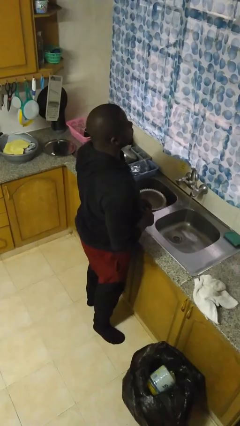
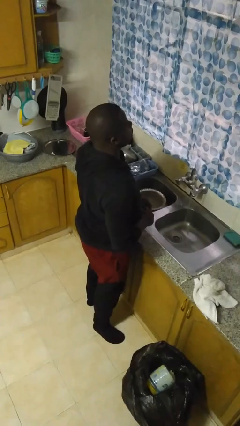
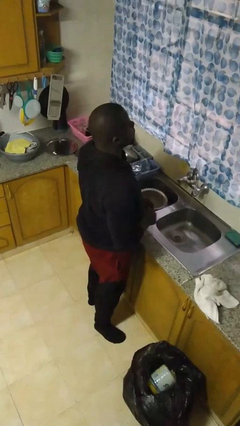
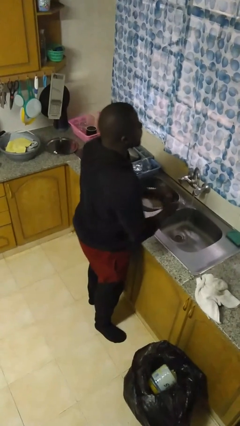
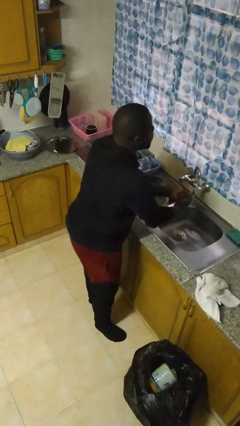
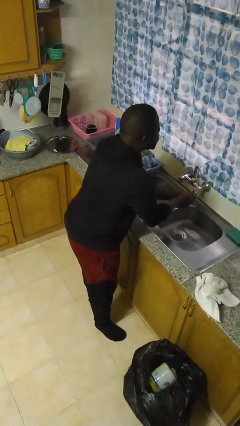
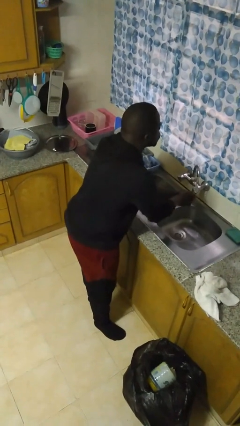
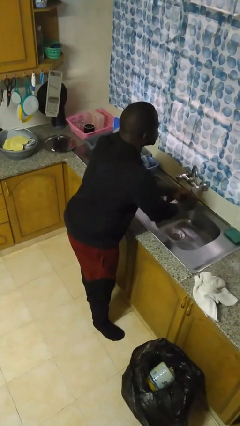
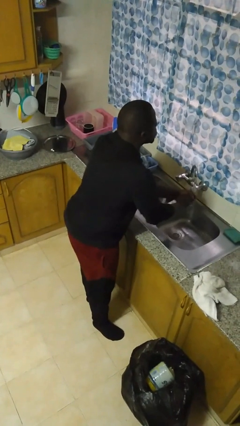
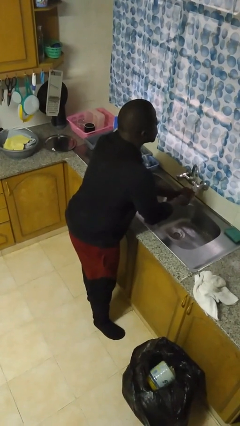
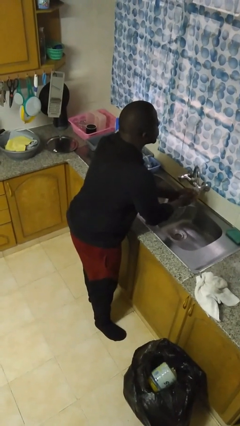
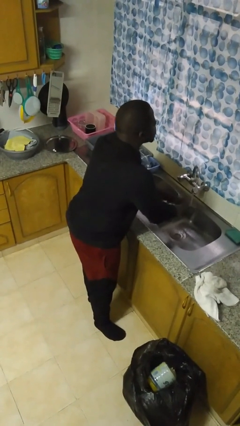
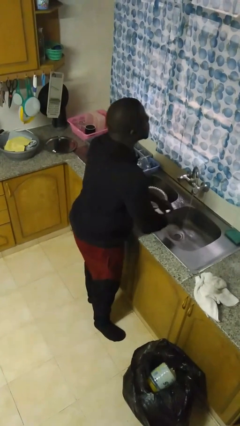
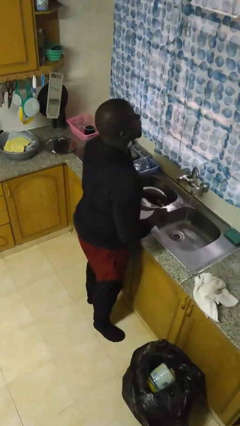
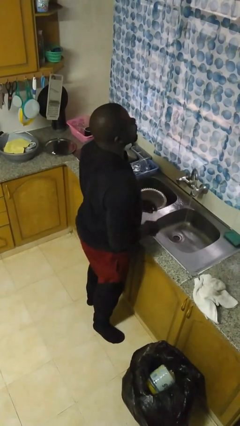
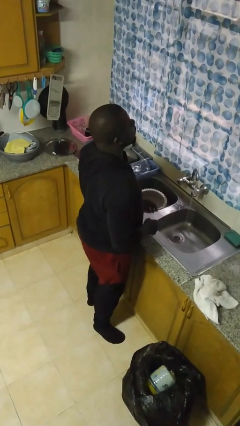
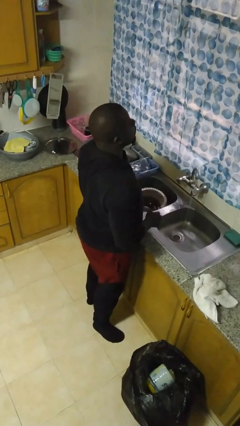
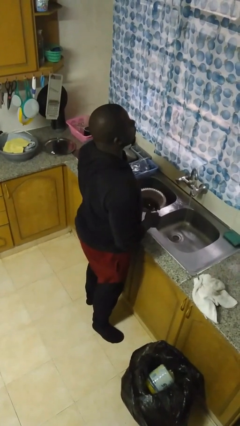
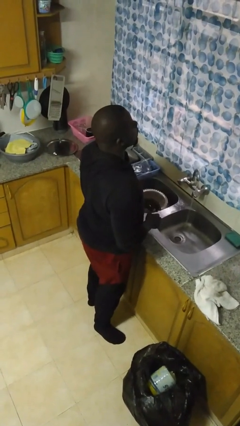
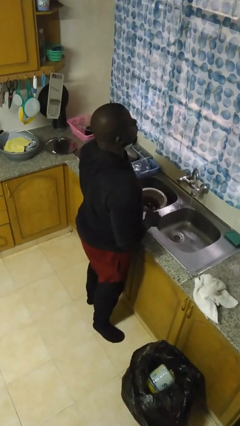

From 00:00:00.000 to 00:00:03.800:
person washes hands

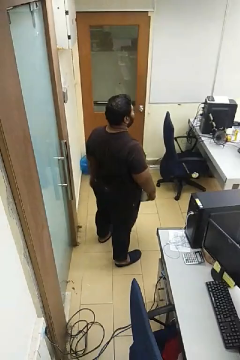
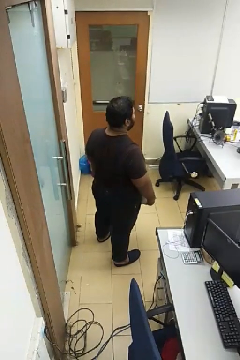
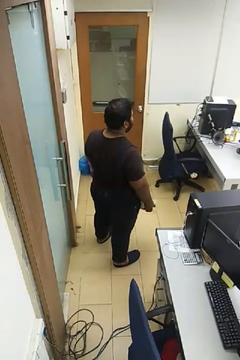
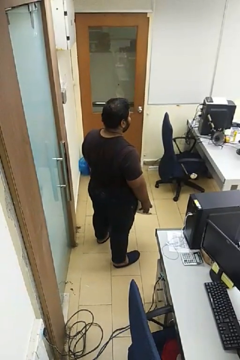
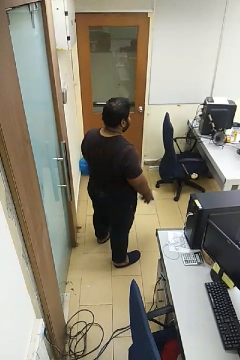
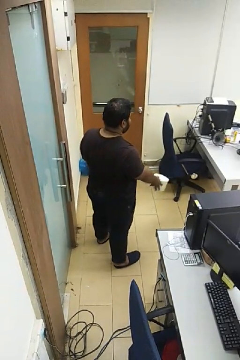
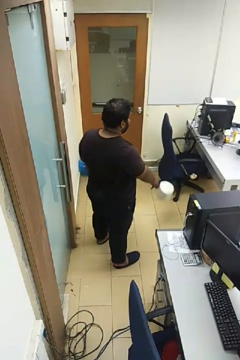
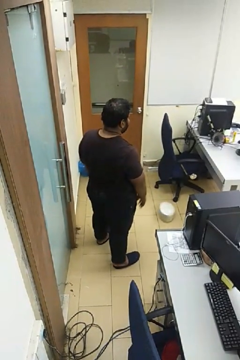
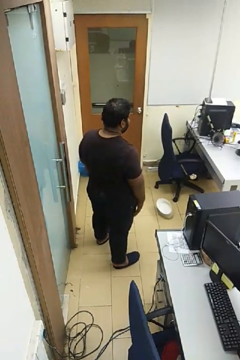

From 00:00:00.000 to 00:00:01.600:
person throws object to ground

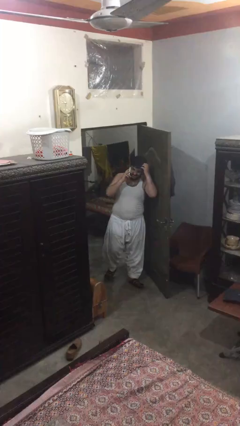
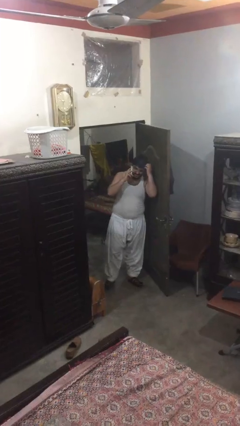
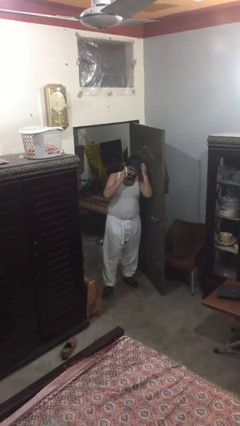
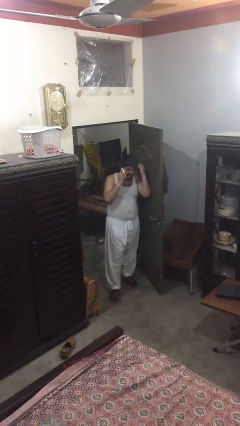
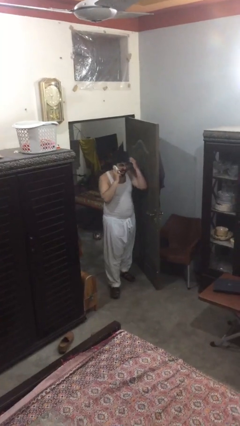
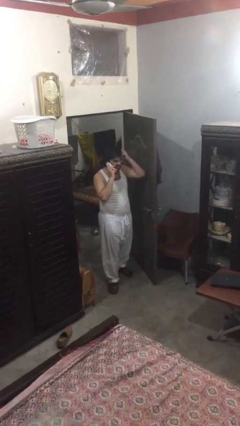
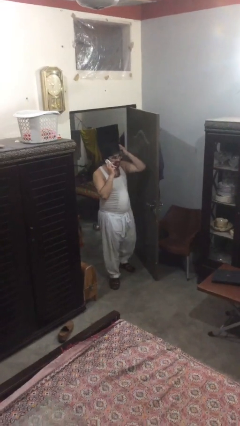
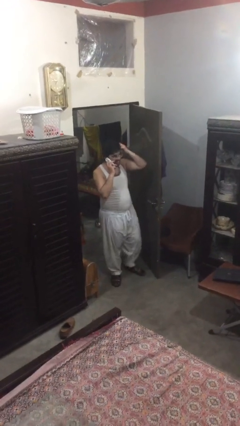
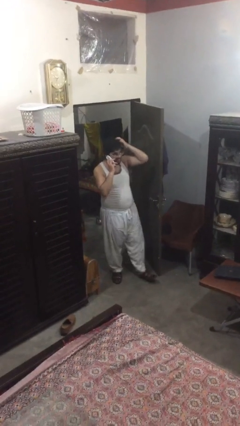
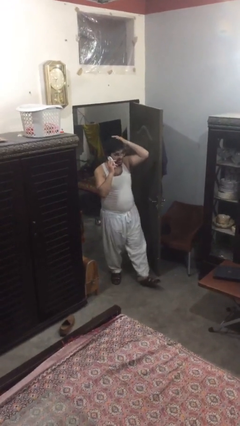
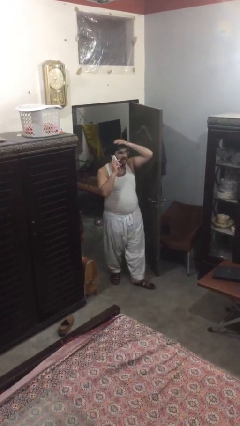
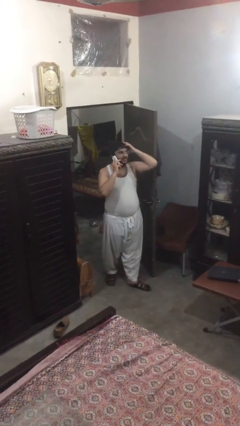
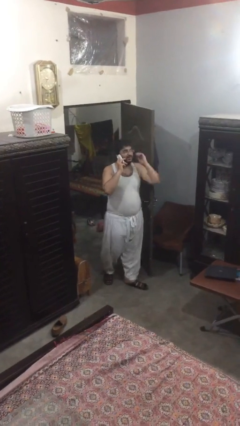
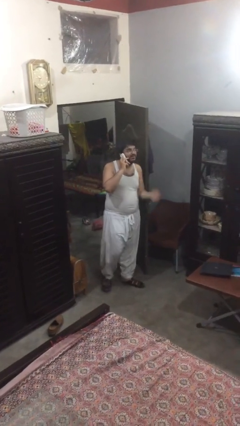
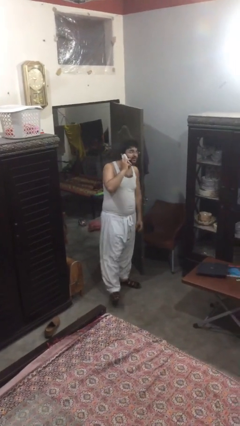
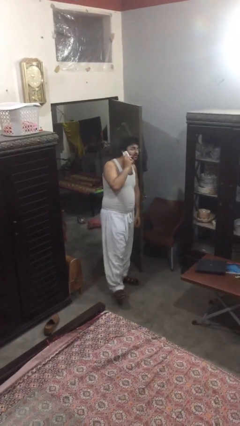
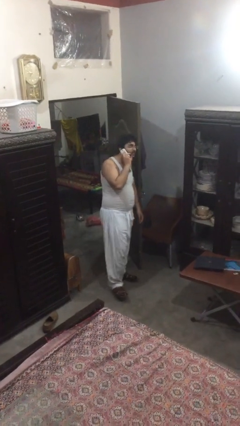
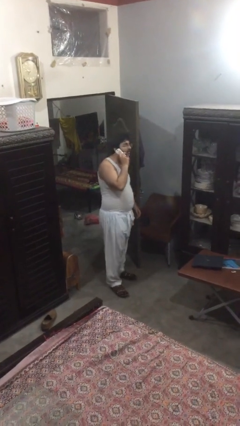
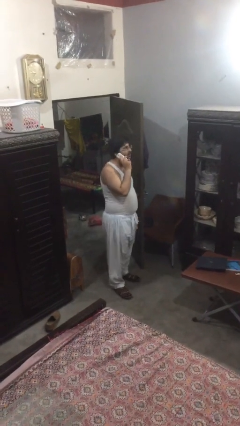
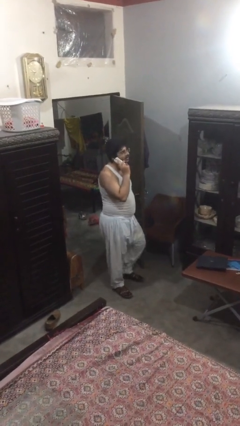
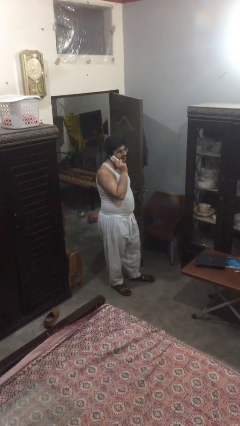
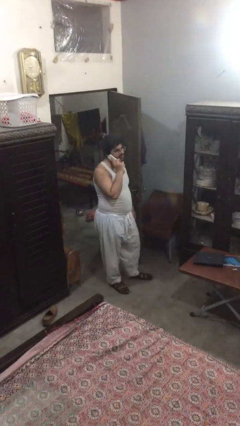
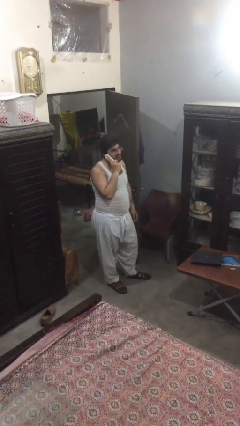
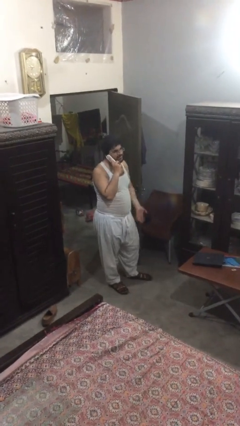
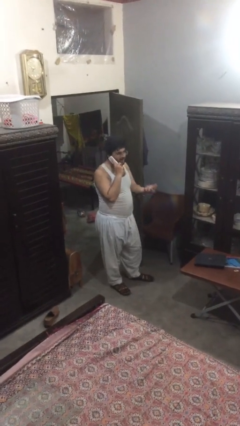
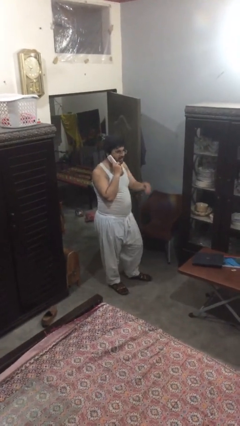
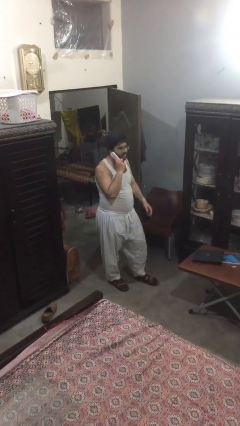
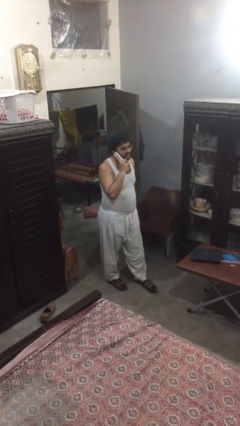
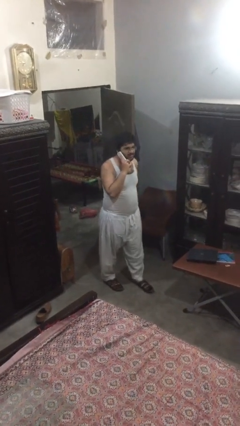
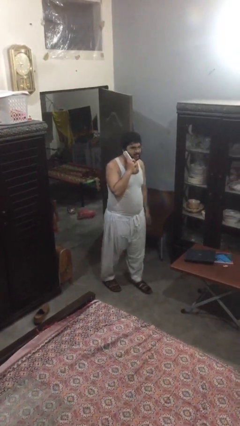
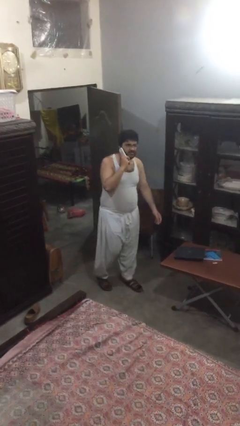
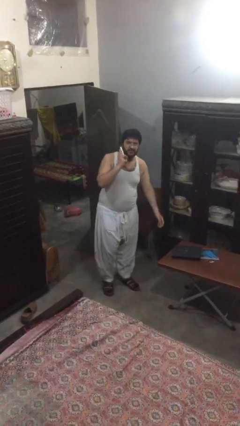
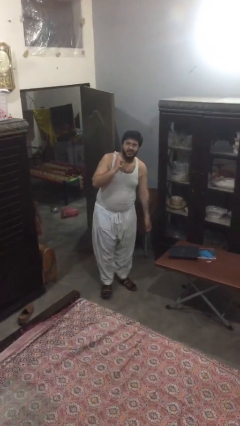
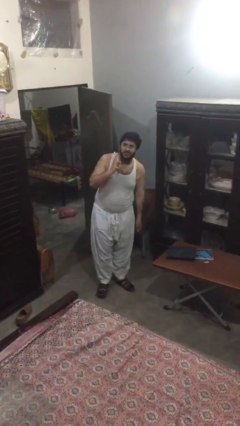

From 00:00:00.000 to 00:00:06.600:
person enters scene through structure

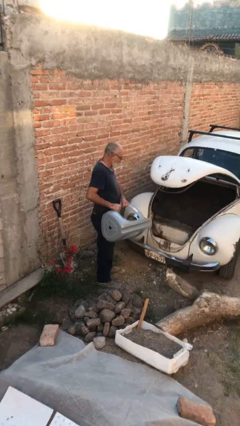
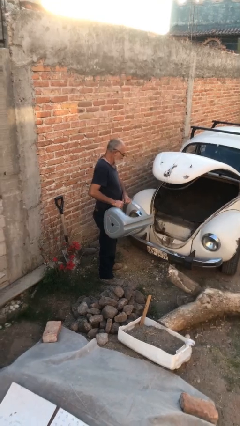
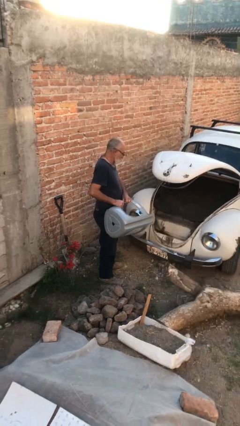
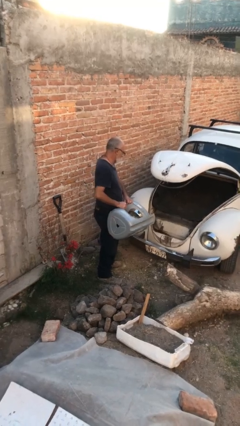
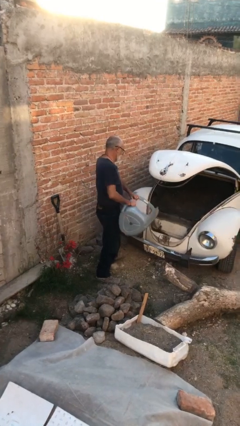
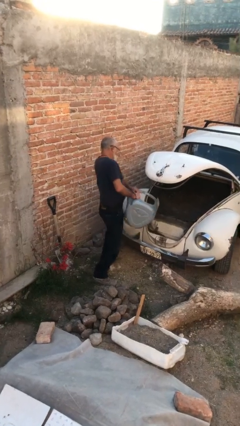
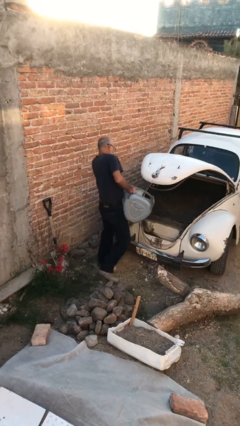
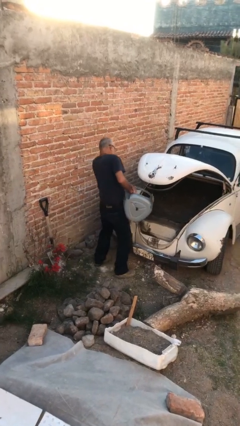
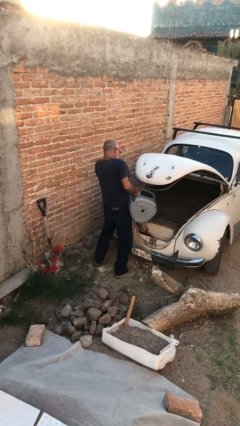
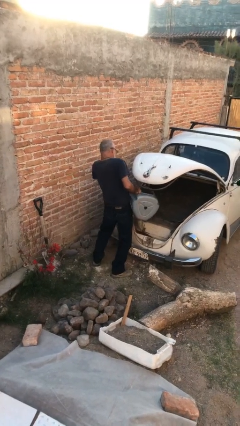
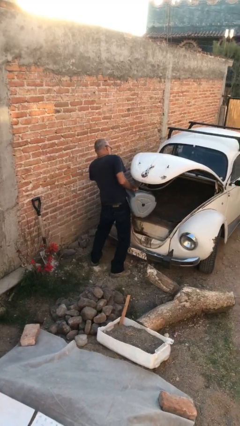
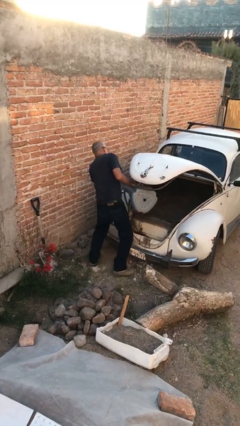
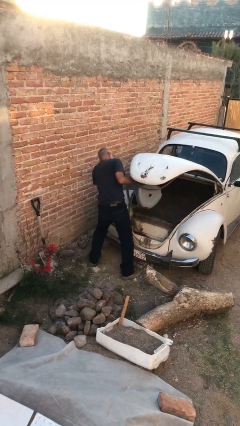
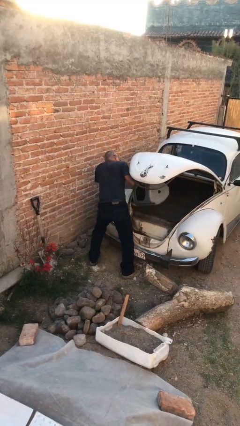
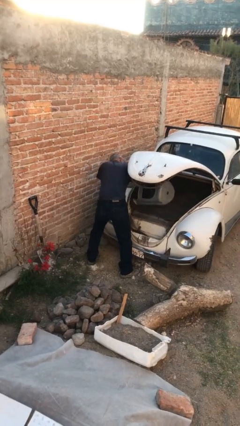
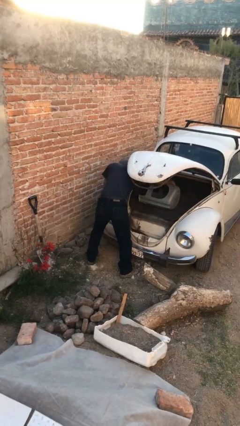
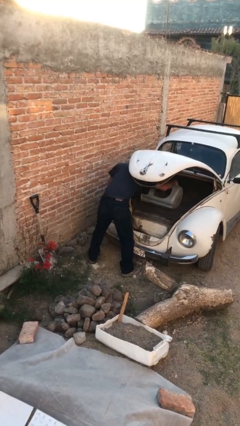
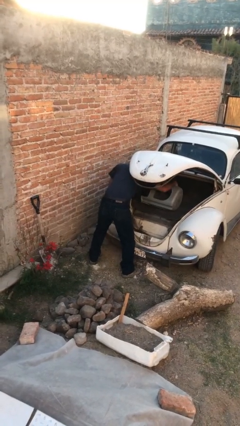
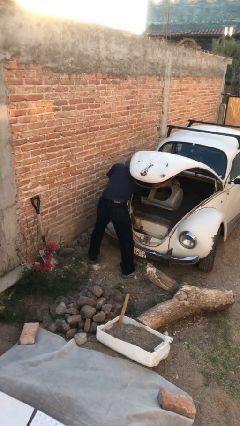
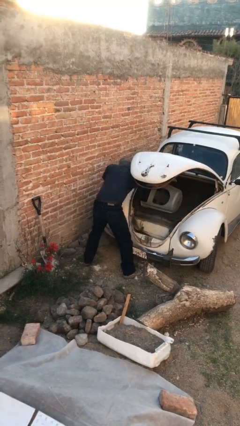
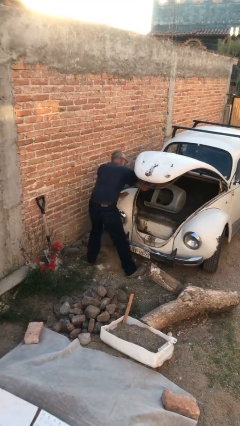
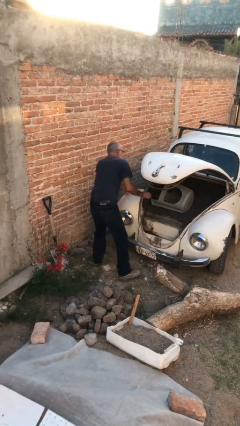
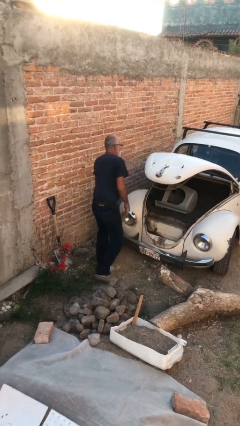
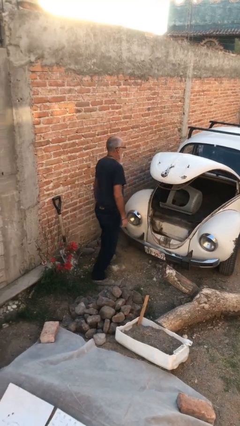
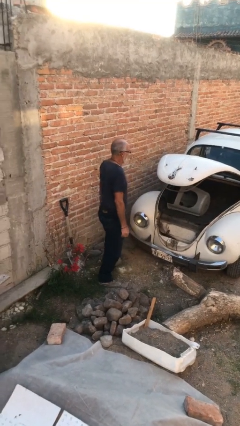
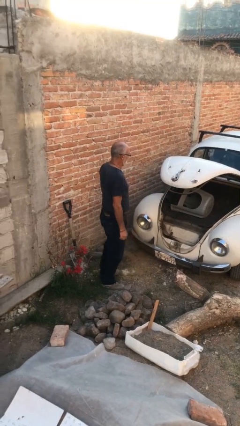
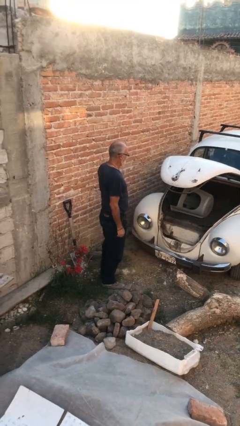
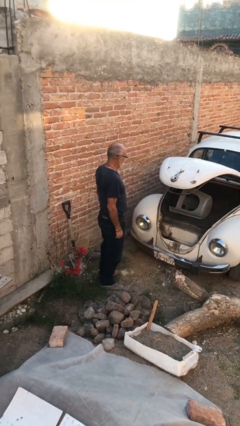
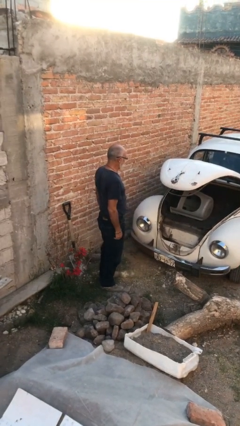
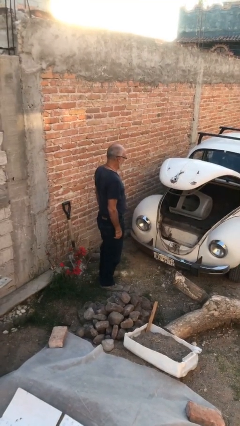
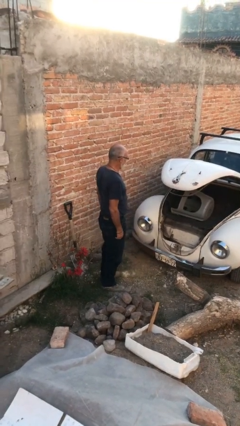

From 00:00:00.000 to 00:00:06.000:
person loads car

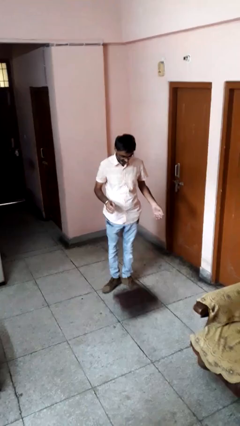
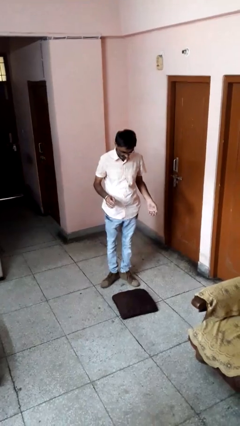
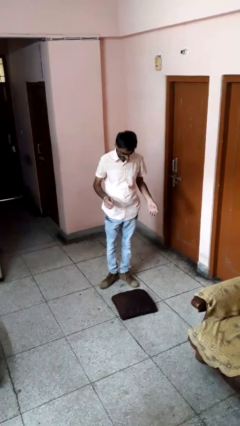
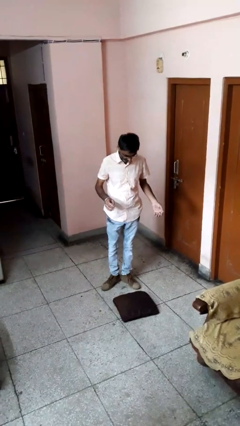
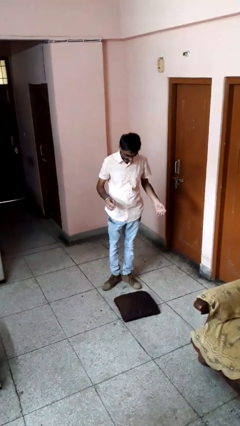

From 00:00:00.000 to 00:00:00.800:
person drops object
